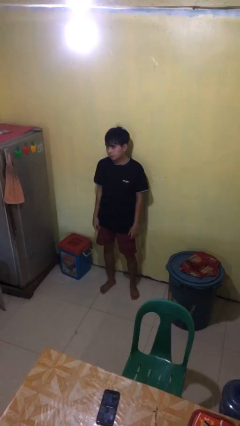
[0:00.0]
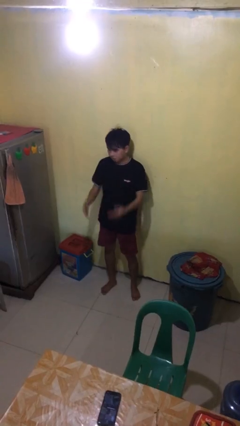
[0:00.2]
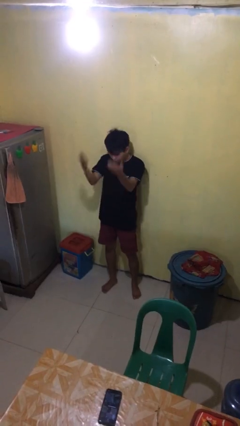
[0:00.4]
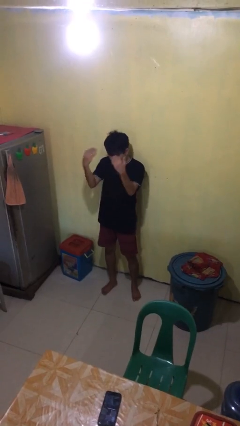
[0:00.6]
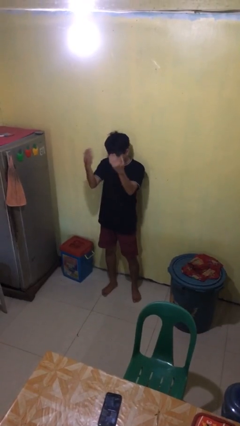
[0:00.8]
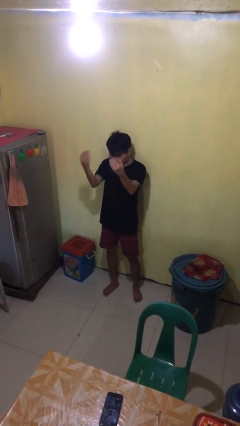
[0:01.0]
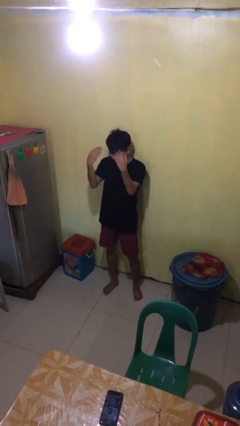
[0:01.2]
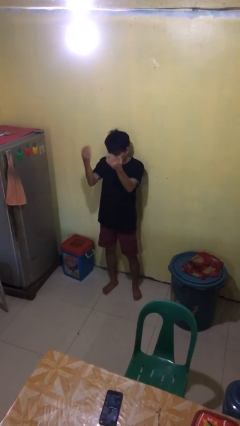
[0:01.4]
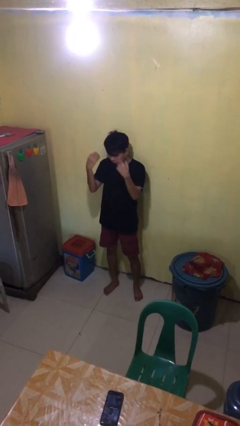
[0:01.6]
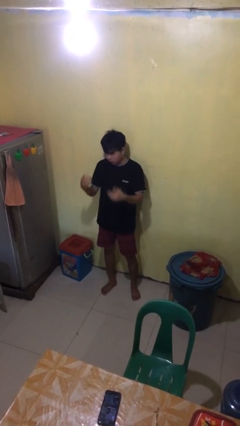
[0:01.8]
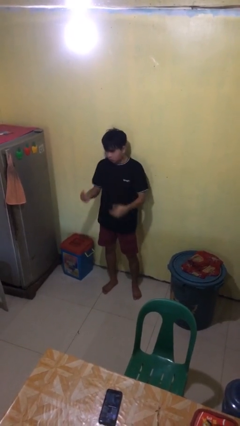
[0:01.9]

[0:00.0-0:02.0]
person gestures come here

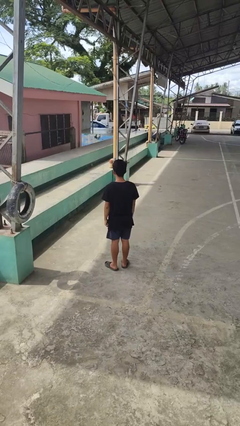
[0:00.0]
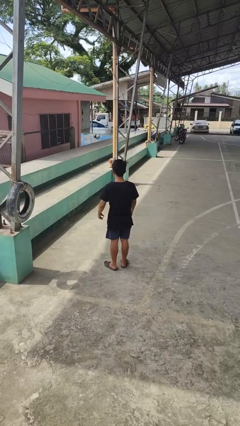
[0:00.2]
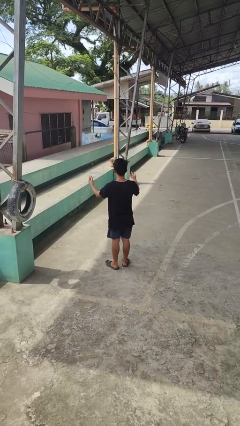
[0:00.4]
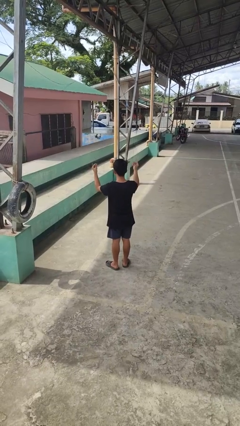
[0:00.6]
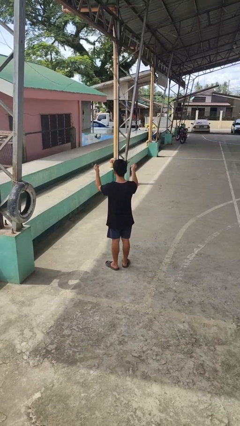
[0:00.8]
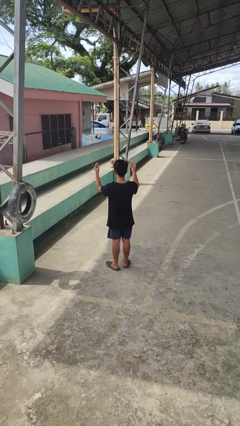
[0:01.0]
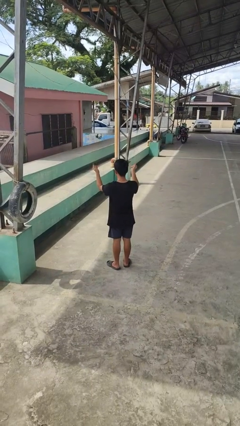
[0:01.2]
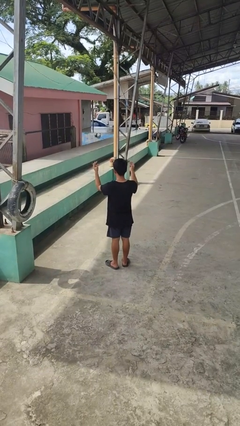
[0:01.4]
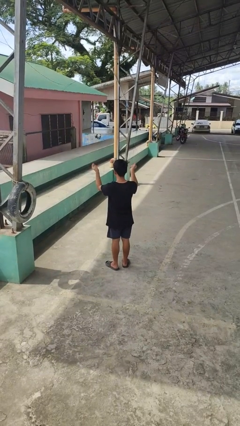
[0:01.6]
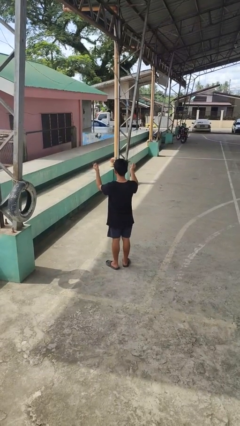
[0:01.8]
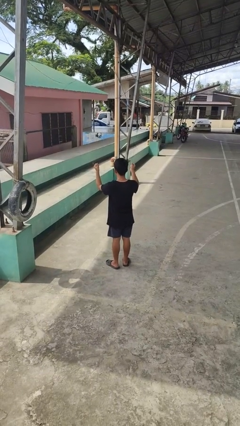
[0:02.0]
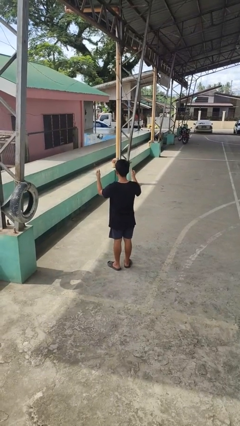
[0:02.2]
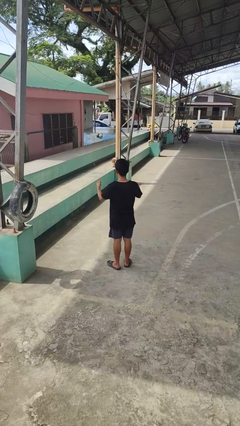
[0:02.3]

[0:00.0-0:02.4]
person snaps fingers

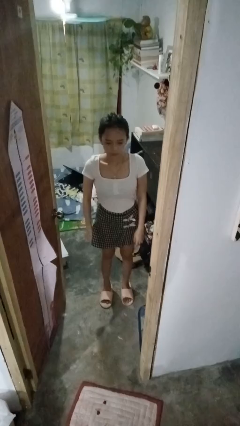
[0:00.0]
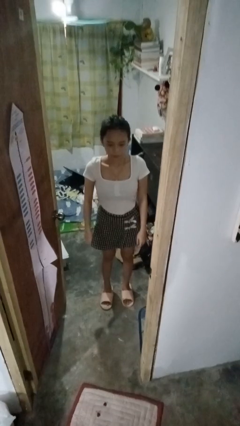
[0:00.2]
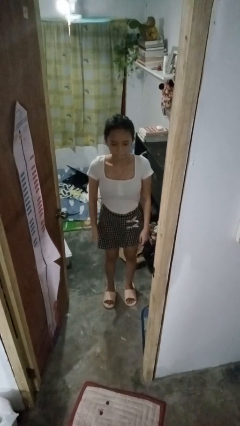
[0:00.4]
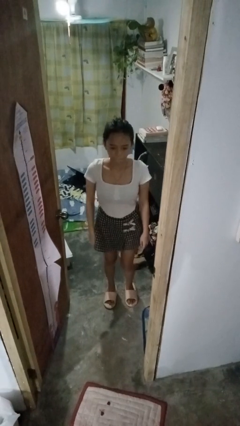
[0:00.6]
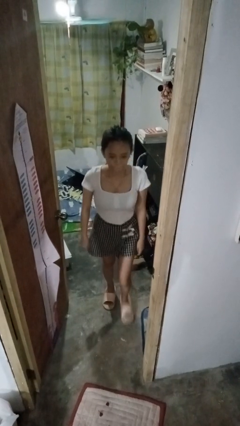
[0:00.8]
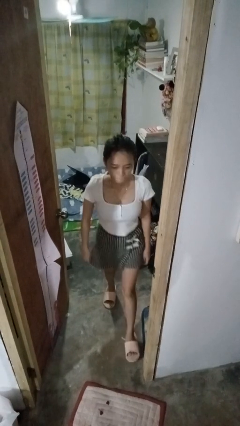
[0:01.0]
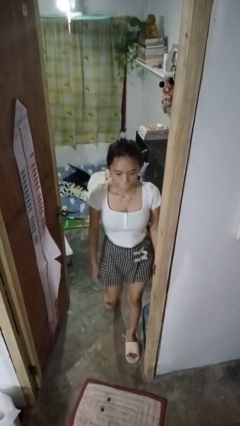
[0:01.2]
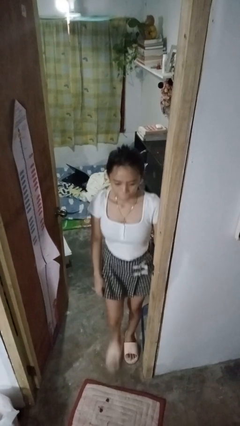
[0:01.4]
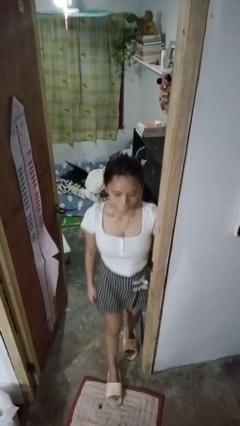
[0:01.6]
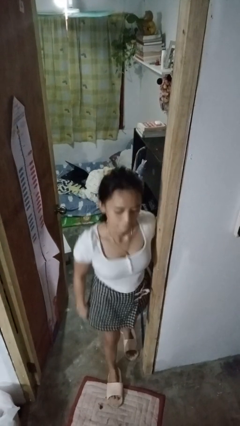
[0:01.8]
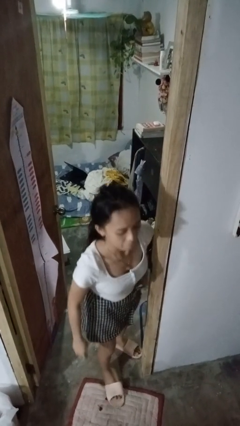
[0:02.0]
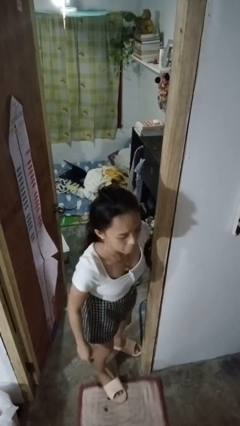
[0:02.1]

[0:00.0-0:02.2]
person bumps into wall

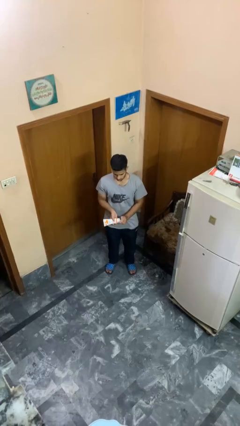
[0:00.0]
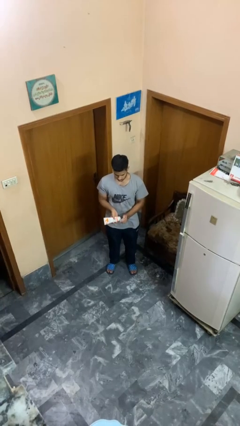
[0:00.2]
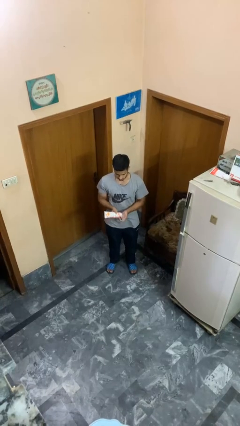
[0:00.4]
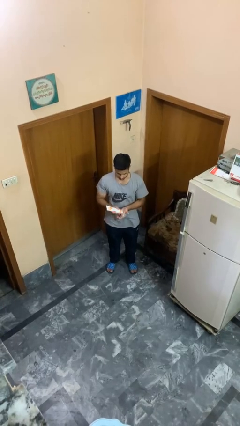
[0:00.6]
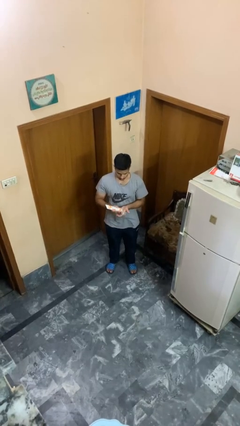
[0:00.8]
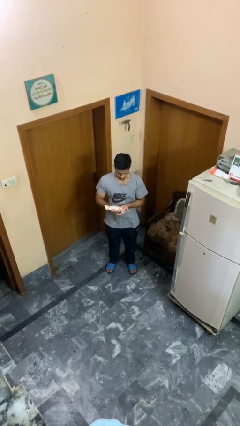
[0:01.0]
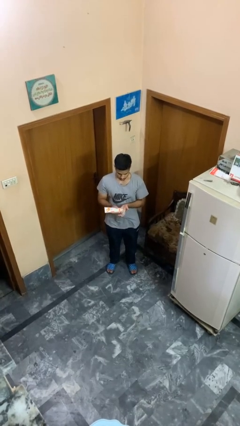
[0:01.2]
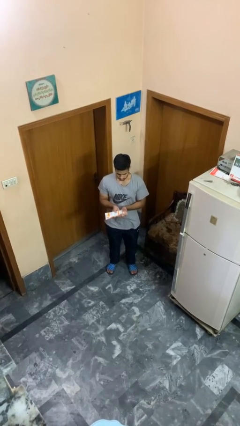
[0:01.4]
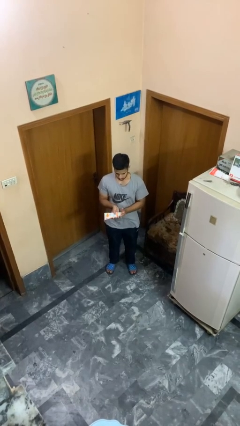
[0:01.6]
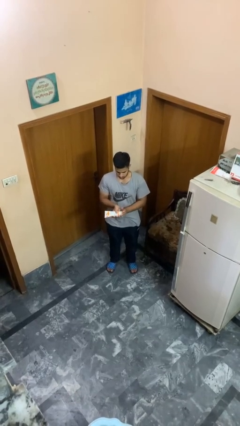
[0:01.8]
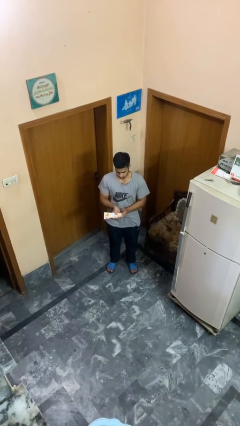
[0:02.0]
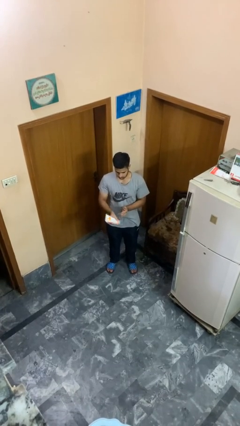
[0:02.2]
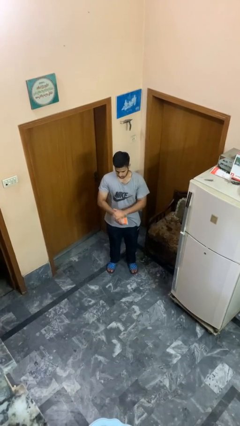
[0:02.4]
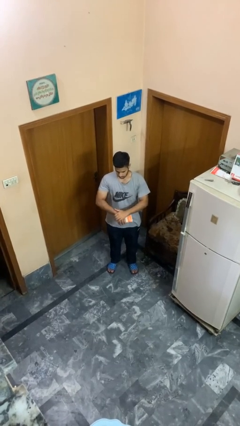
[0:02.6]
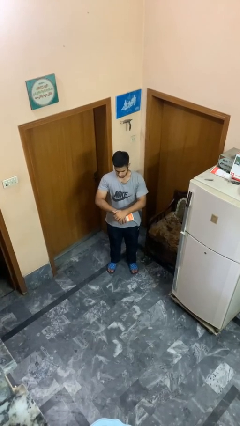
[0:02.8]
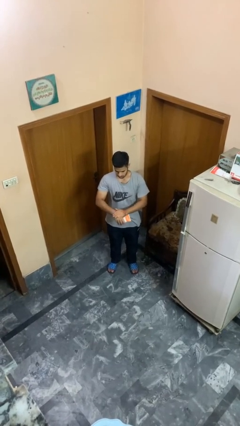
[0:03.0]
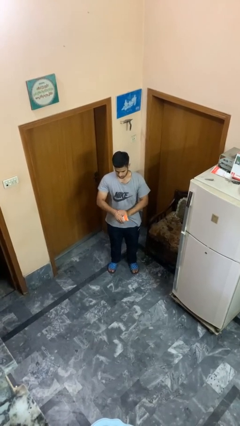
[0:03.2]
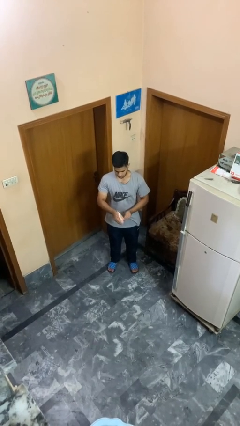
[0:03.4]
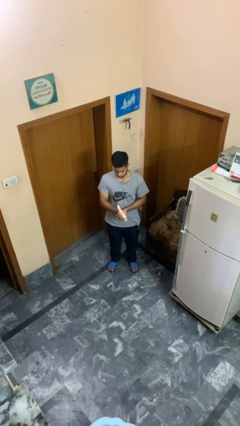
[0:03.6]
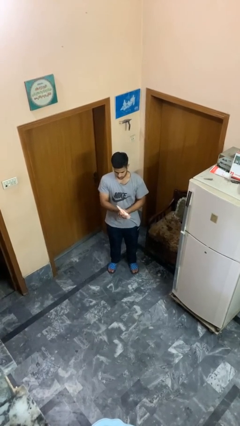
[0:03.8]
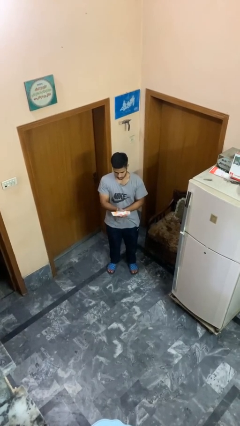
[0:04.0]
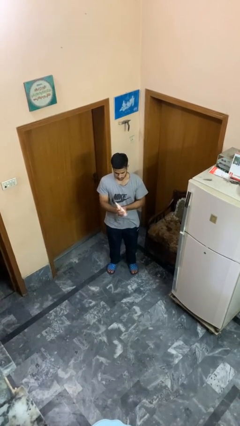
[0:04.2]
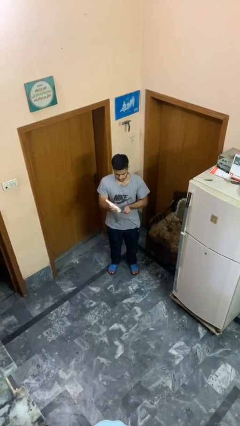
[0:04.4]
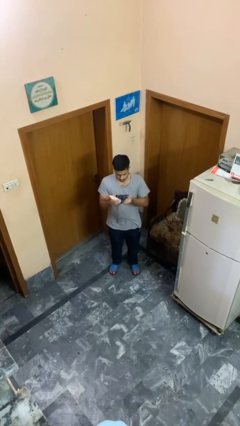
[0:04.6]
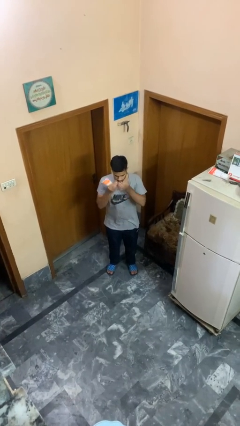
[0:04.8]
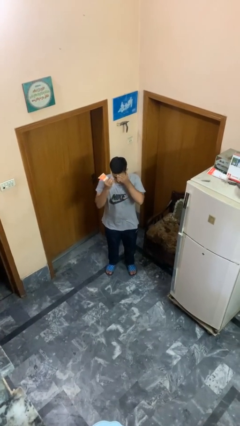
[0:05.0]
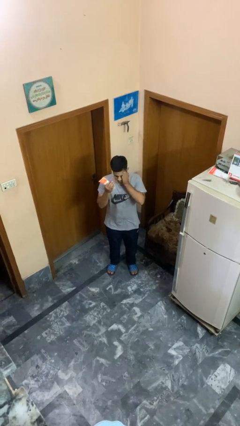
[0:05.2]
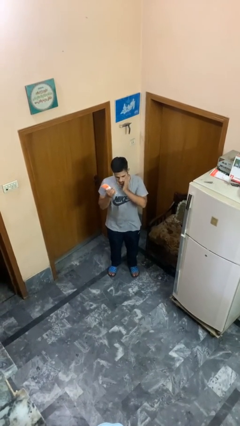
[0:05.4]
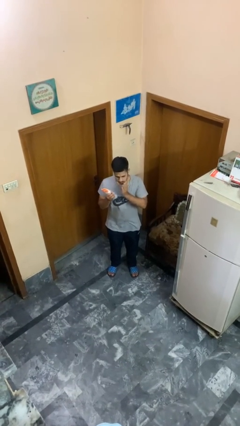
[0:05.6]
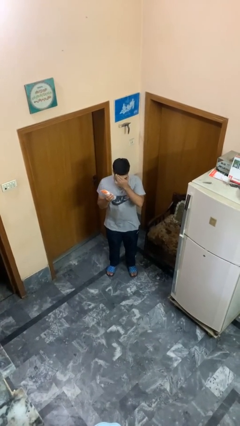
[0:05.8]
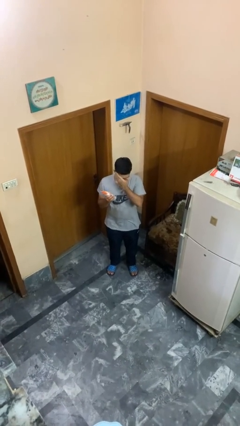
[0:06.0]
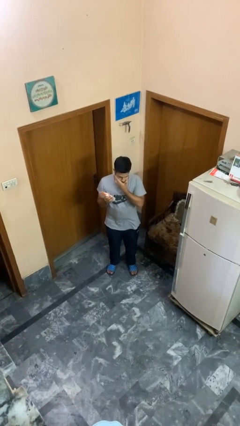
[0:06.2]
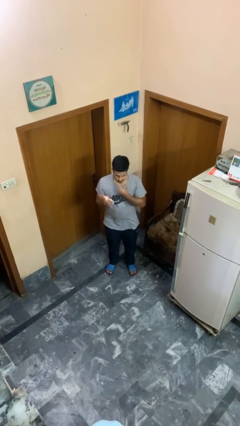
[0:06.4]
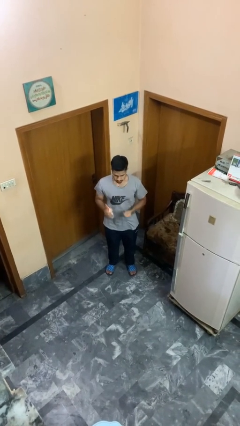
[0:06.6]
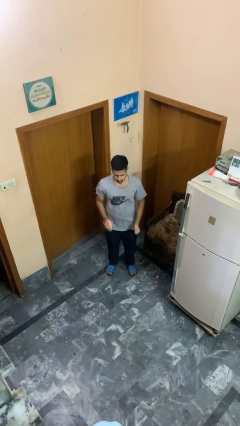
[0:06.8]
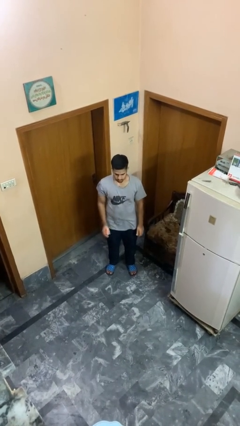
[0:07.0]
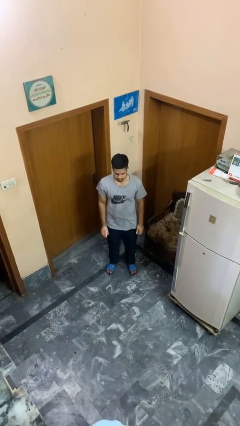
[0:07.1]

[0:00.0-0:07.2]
person applies sunscreen

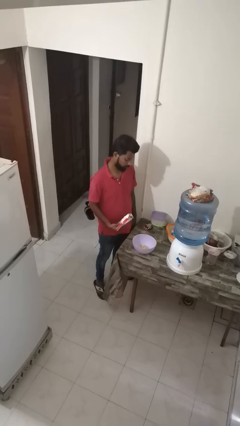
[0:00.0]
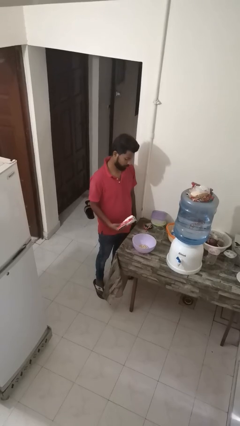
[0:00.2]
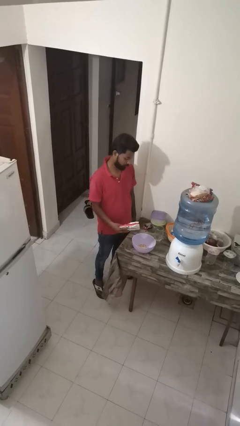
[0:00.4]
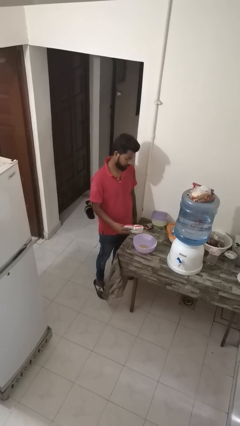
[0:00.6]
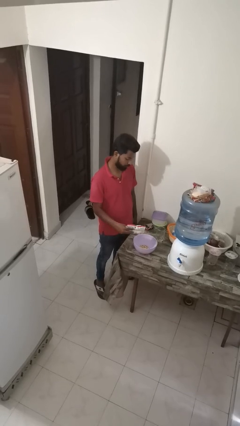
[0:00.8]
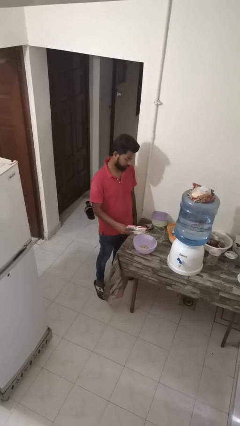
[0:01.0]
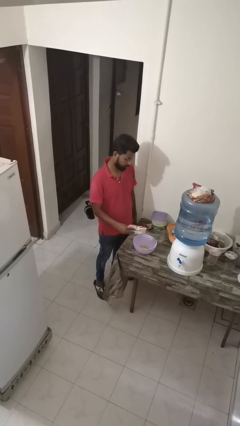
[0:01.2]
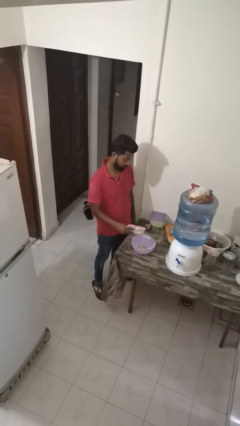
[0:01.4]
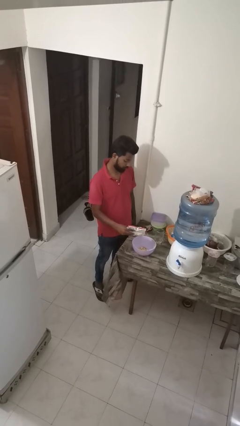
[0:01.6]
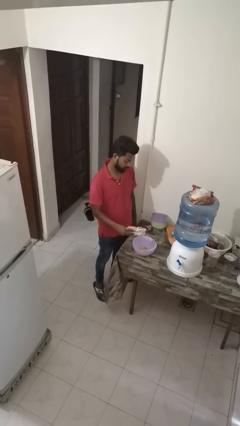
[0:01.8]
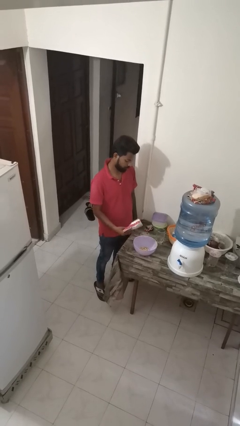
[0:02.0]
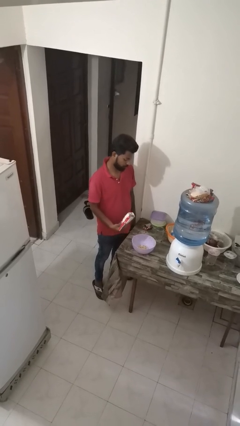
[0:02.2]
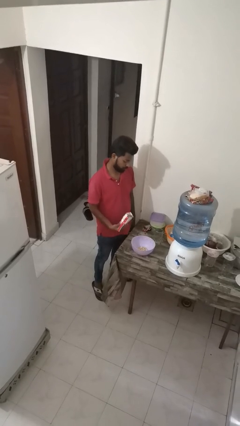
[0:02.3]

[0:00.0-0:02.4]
person pours into bowl

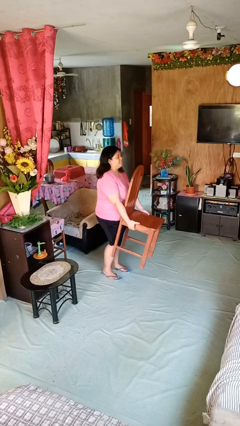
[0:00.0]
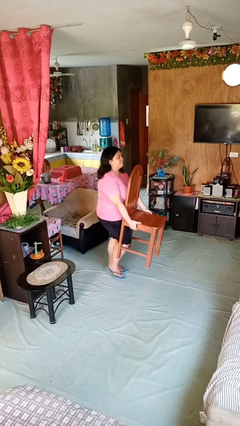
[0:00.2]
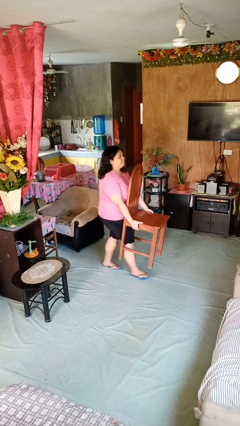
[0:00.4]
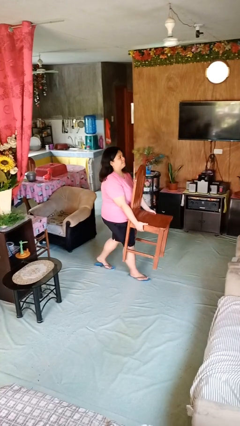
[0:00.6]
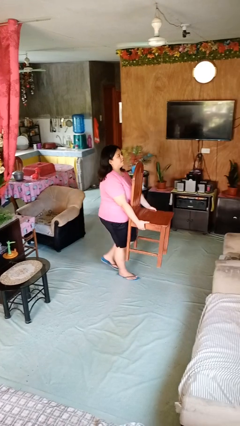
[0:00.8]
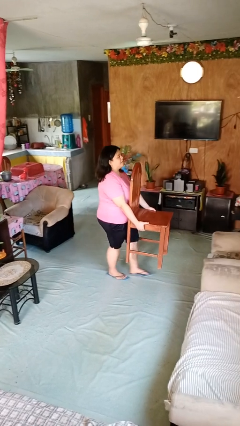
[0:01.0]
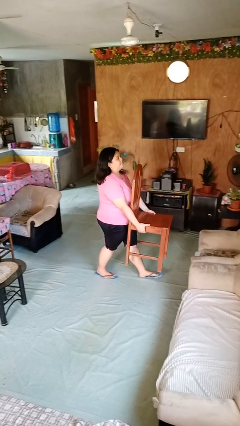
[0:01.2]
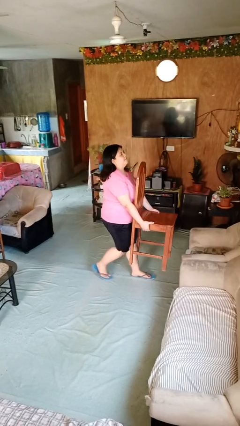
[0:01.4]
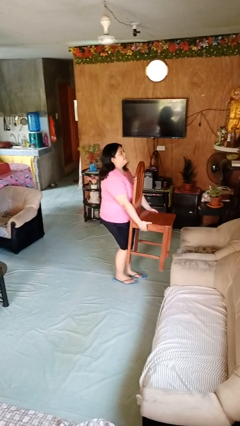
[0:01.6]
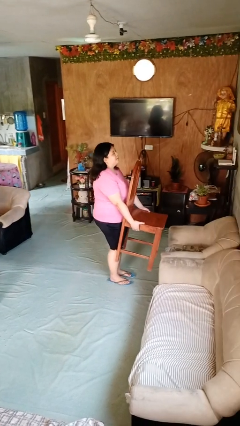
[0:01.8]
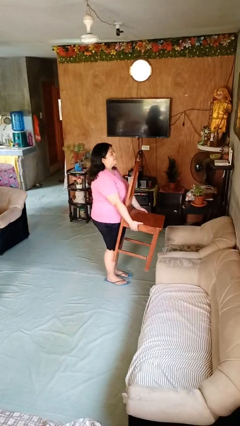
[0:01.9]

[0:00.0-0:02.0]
person carries furniture
